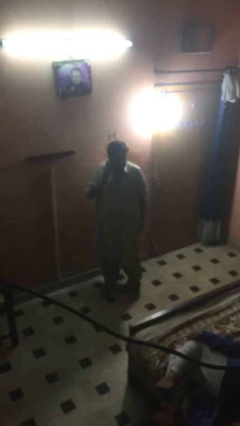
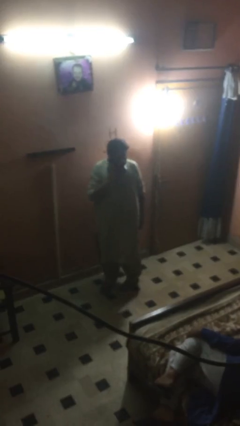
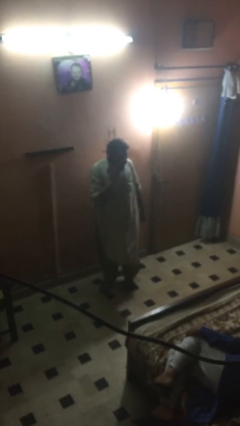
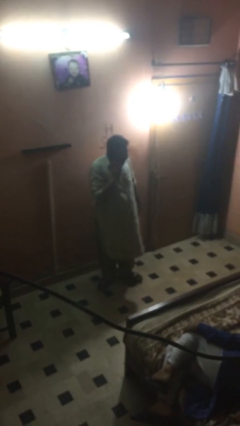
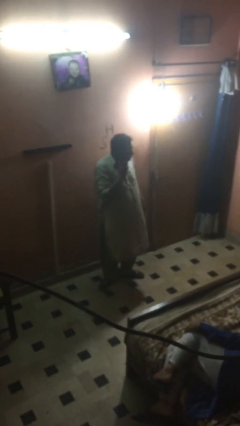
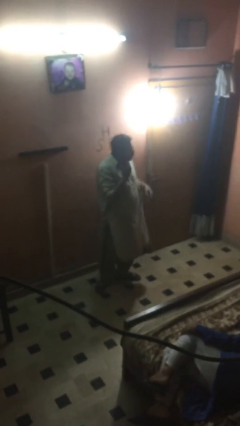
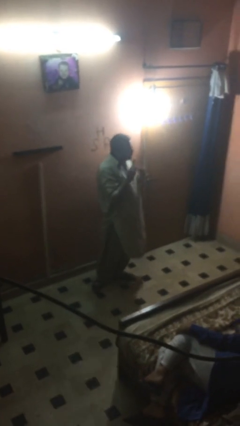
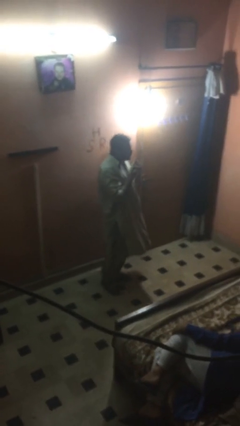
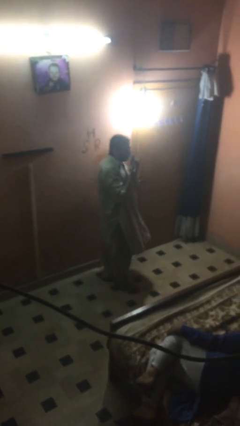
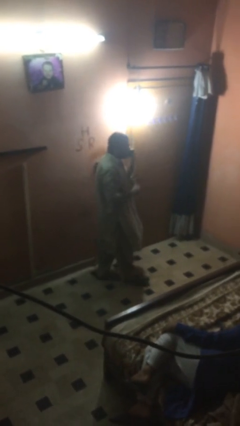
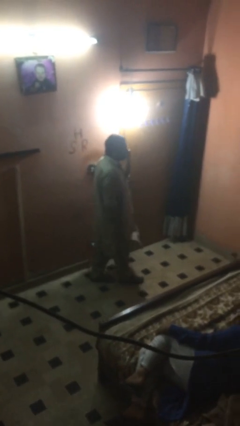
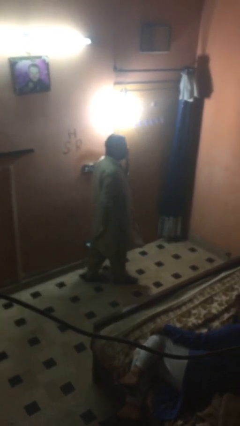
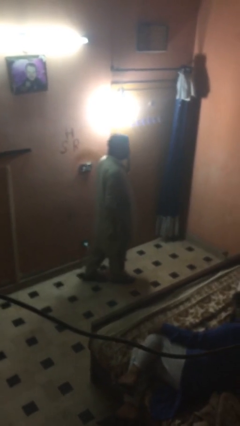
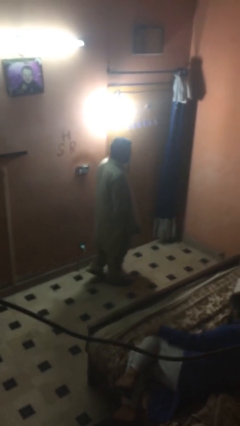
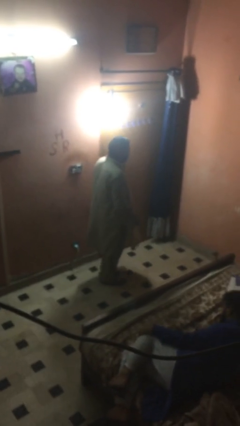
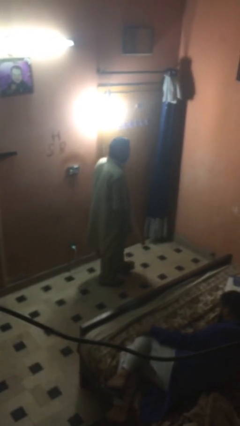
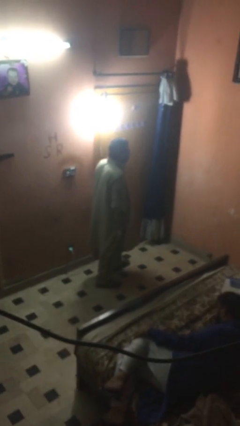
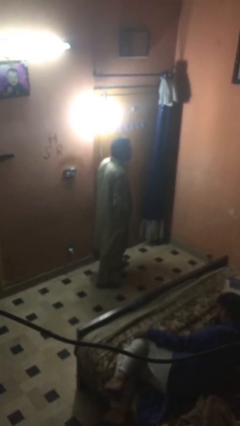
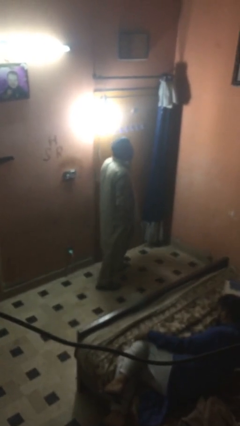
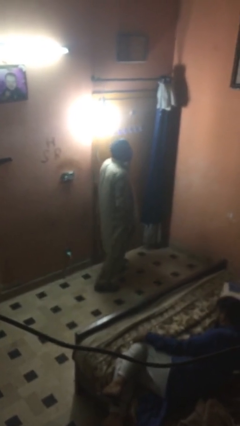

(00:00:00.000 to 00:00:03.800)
person talks on phone

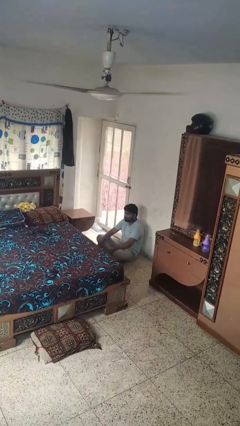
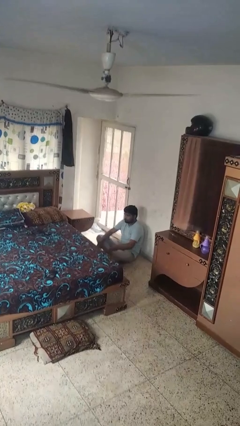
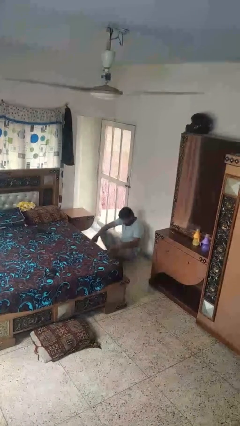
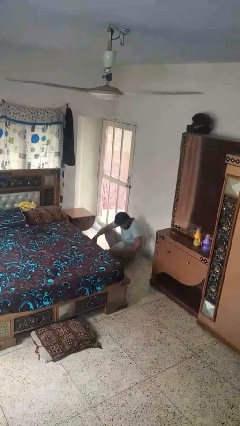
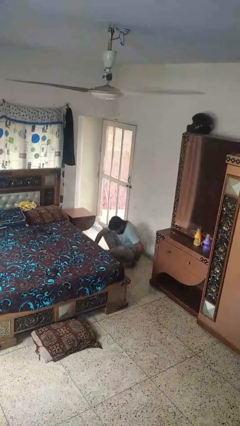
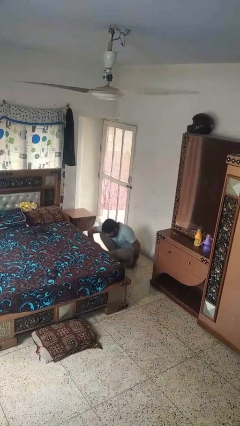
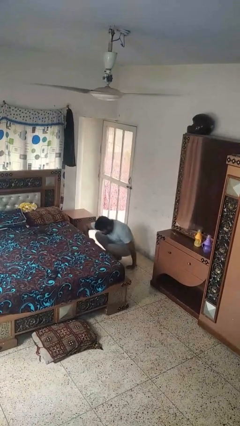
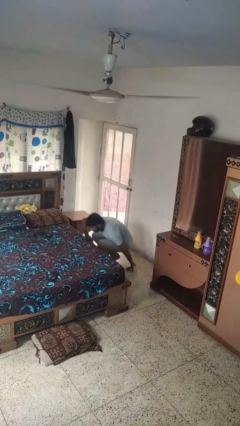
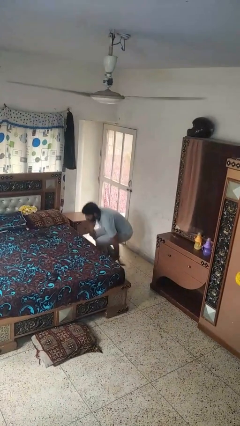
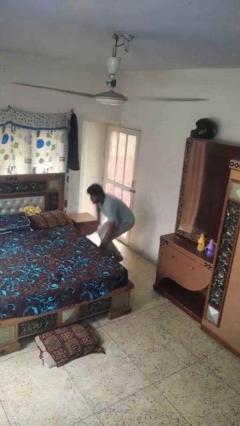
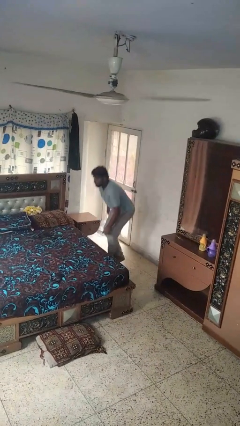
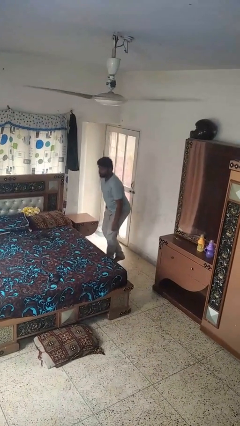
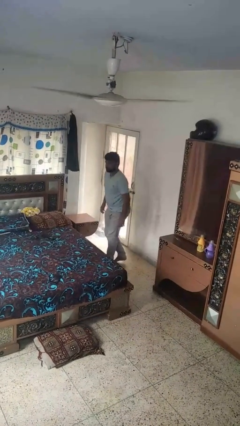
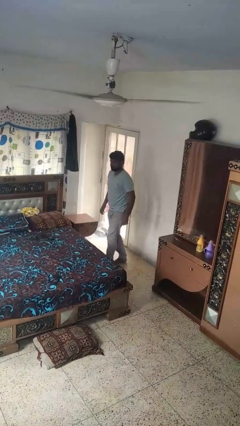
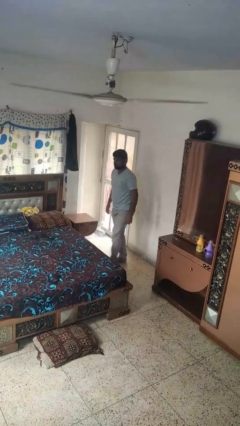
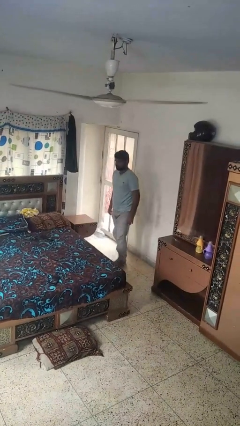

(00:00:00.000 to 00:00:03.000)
person stands up from floor

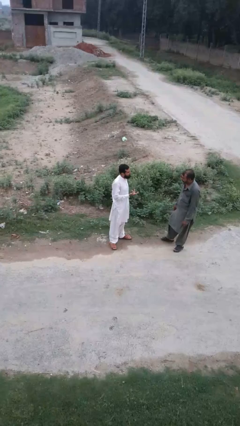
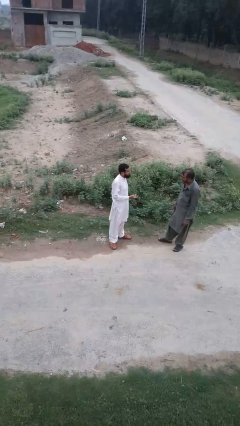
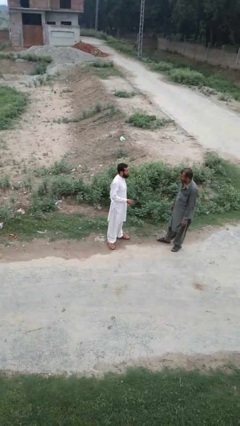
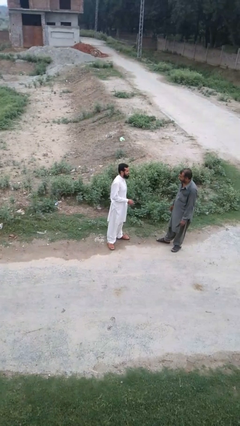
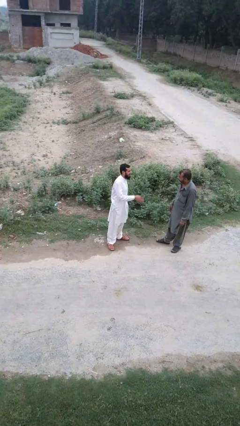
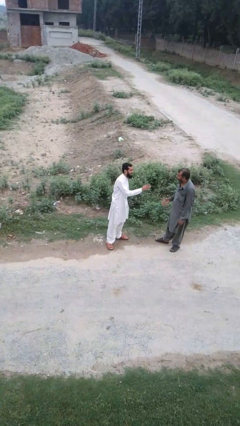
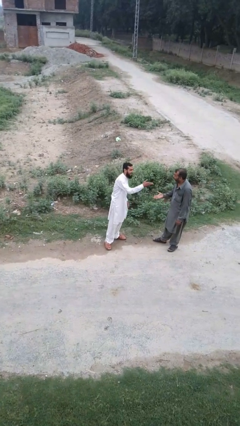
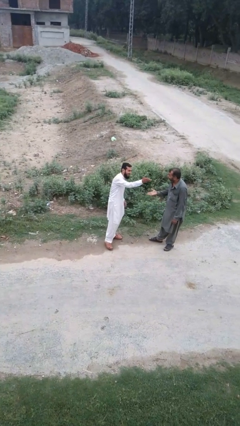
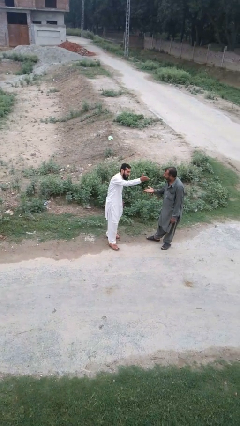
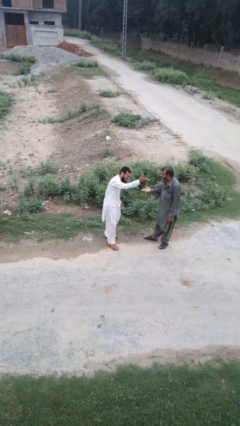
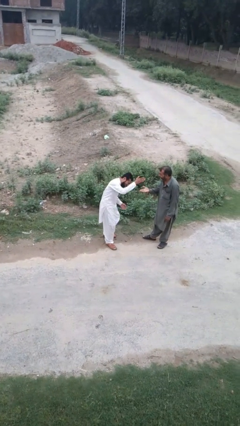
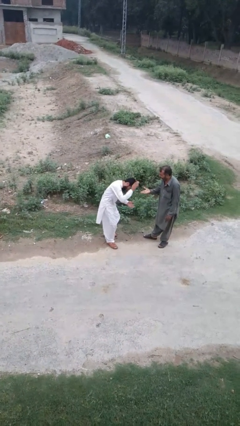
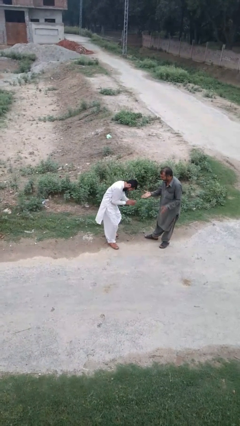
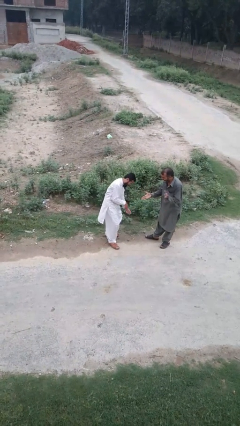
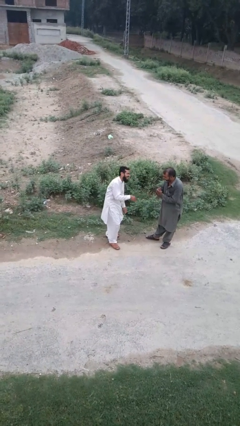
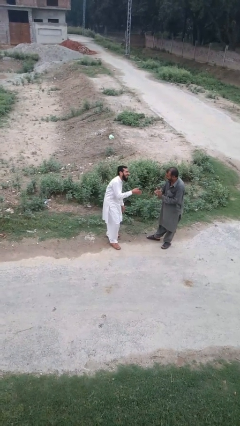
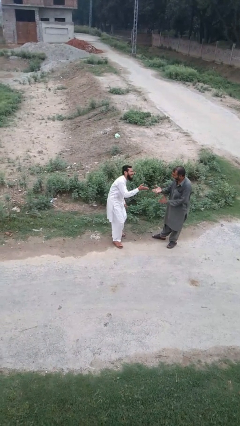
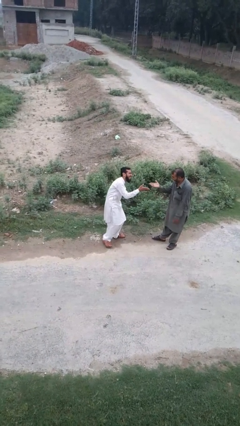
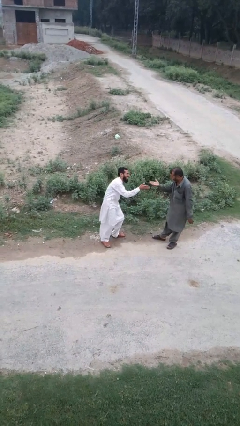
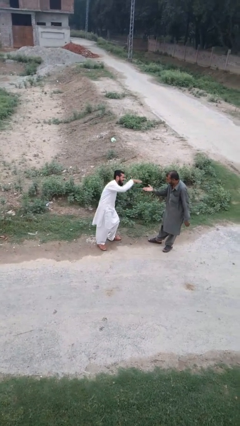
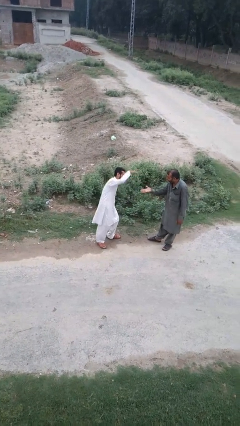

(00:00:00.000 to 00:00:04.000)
person laughs with person

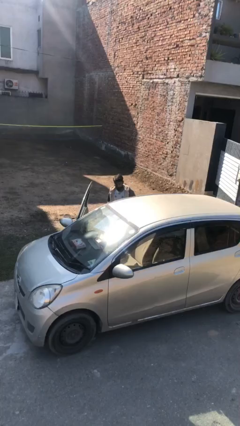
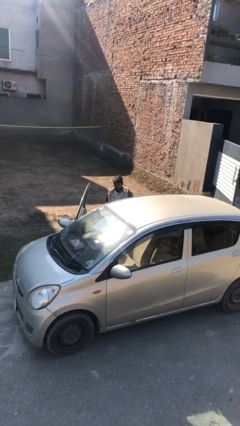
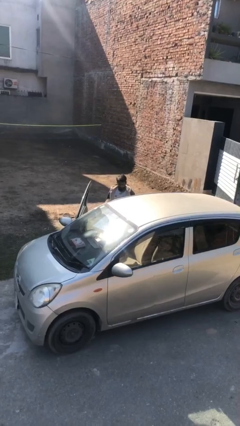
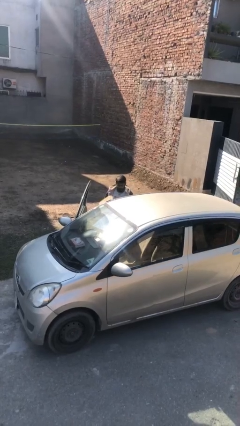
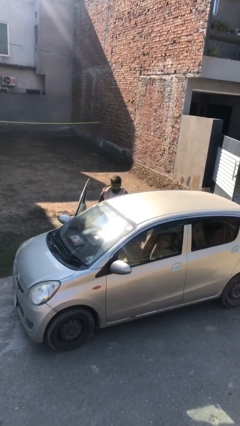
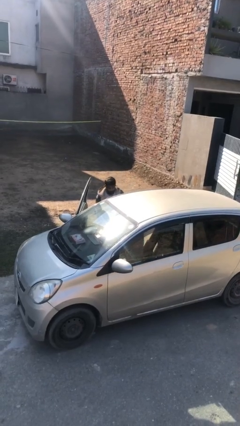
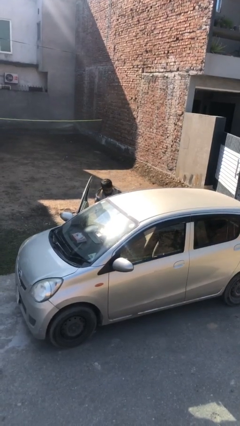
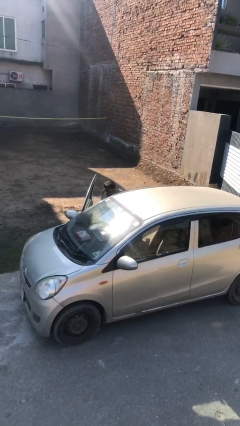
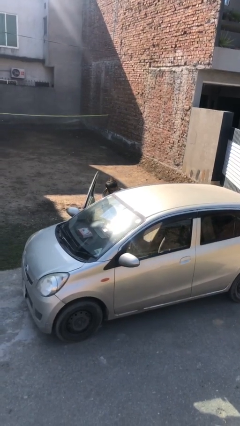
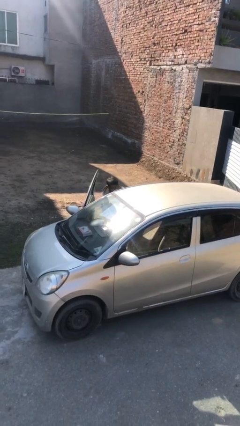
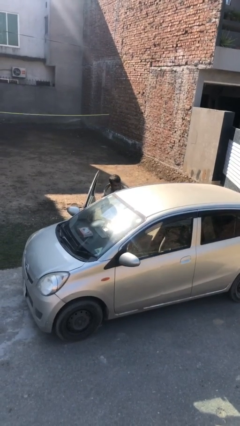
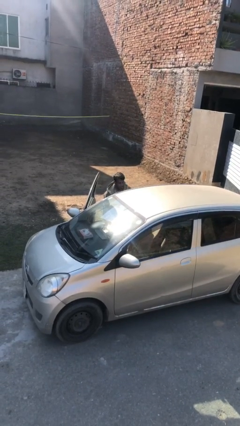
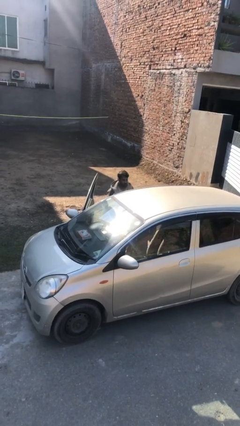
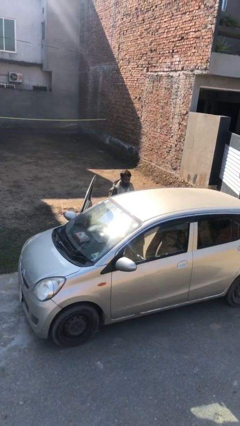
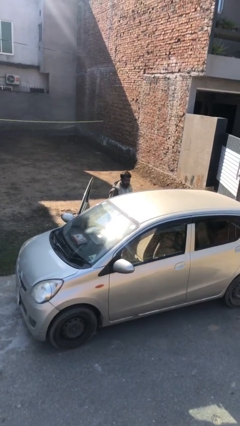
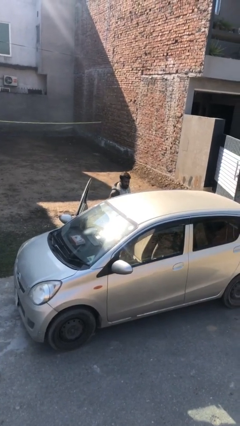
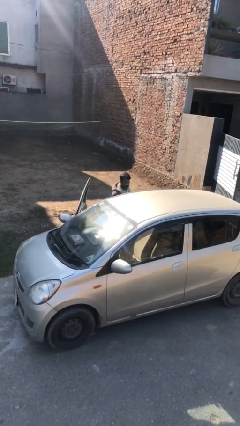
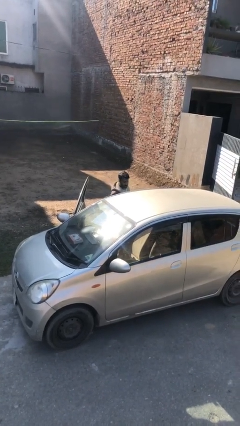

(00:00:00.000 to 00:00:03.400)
person loads car

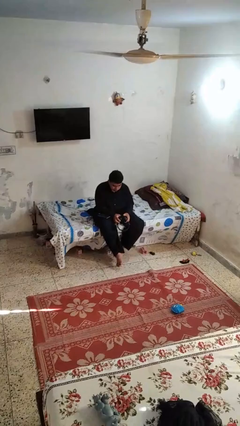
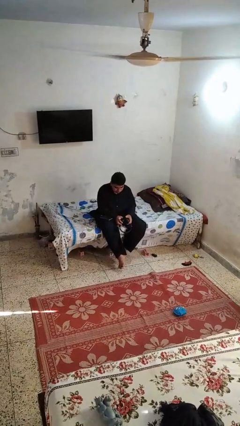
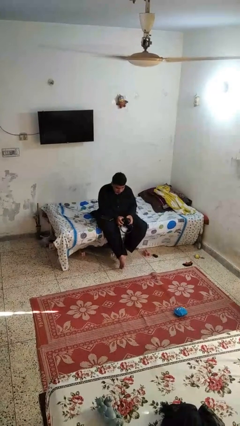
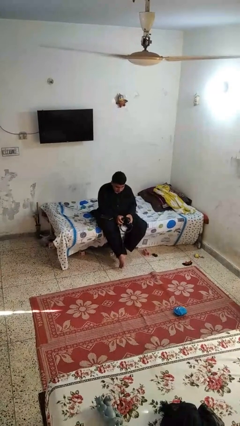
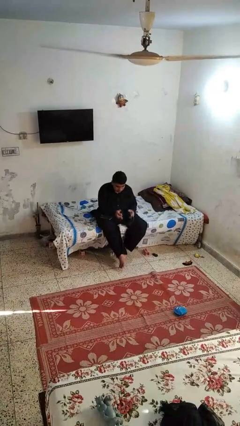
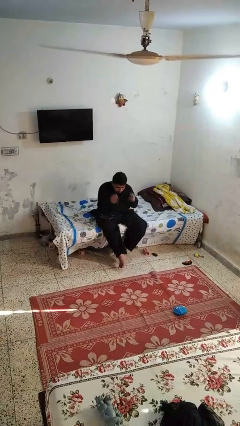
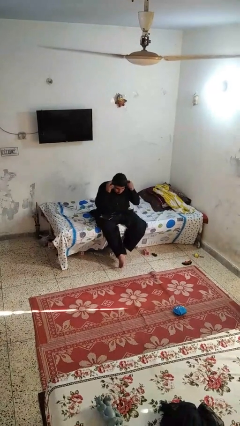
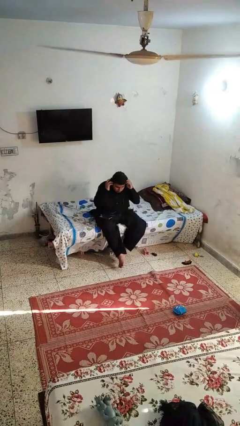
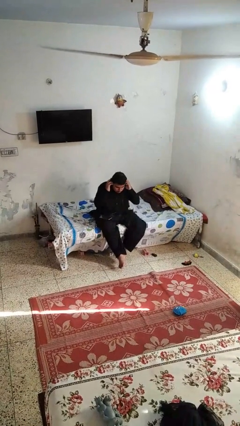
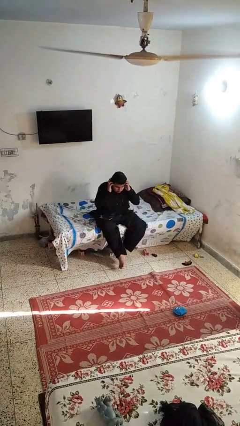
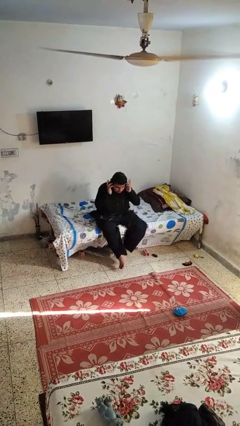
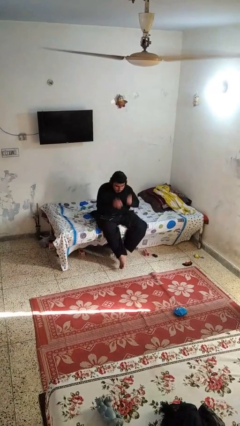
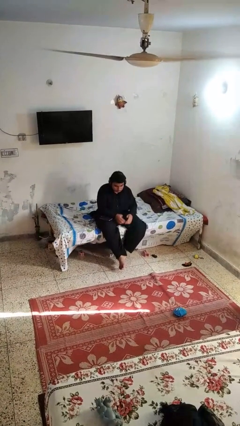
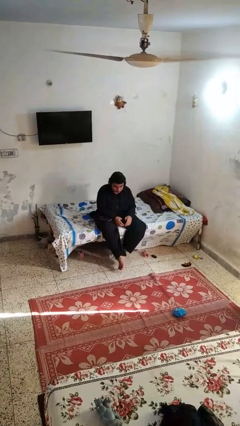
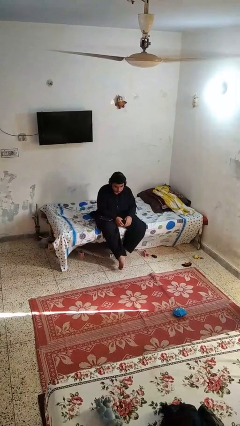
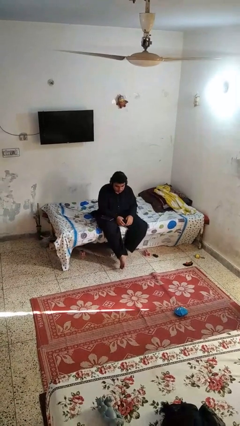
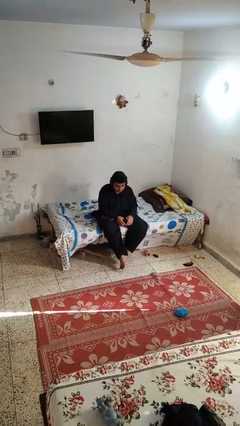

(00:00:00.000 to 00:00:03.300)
person puts on headphones

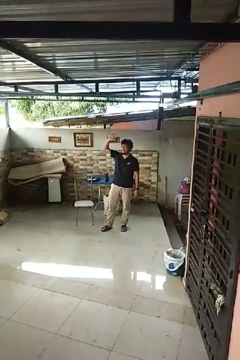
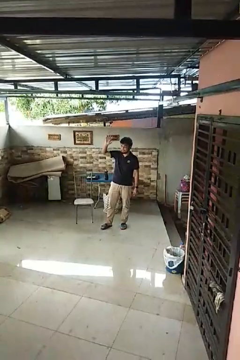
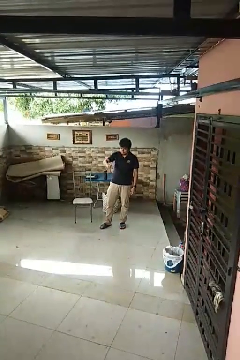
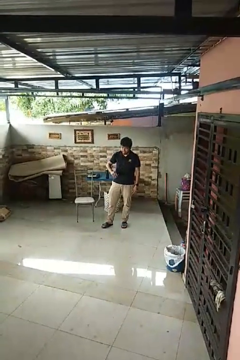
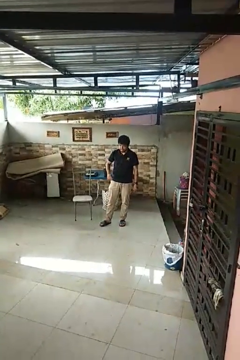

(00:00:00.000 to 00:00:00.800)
person gestures swipe down
